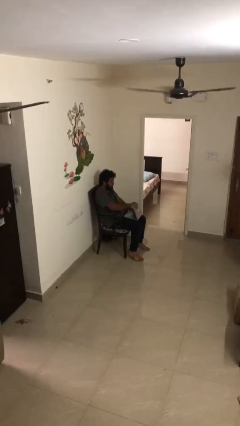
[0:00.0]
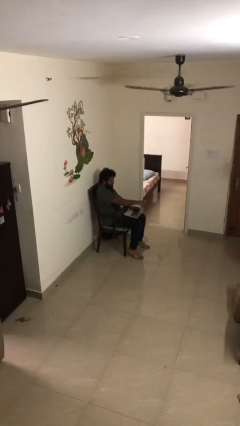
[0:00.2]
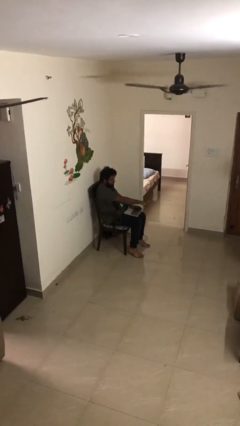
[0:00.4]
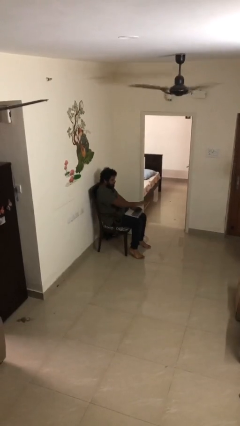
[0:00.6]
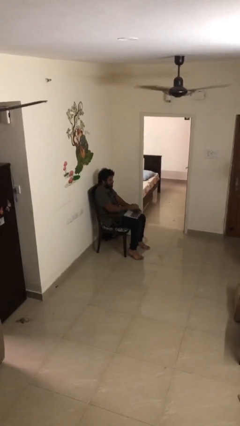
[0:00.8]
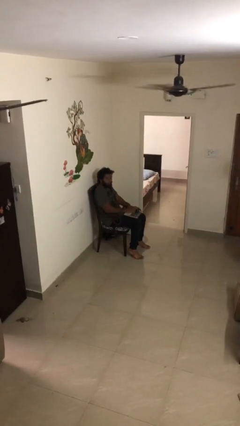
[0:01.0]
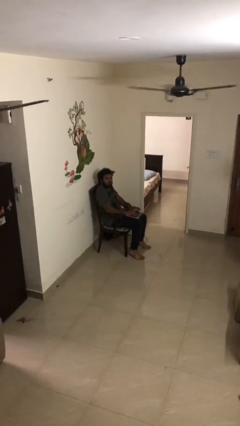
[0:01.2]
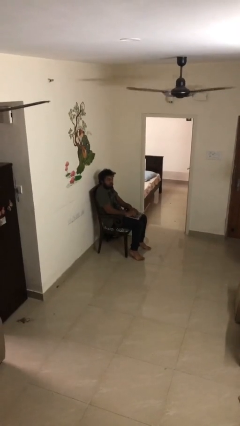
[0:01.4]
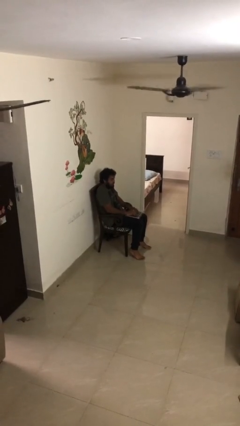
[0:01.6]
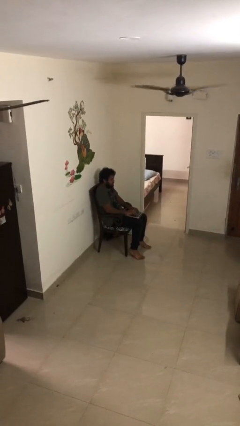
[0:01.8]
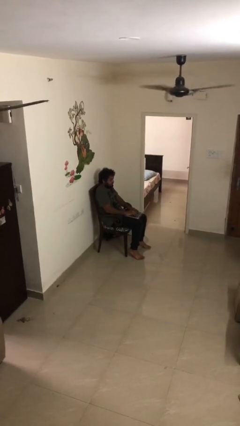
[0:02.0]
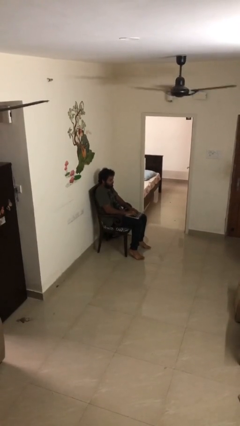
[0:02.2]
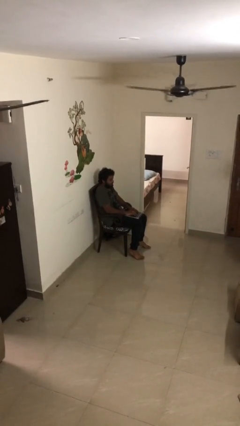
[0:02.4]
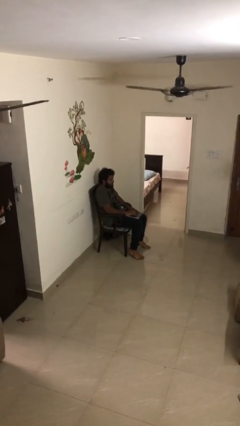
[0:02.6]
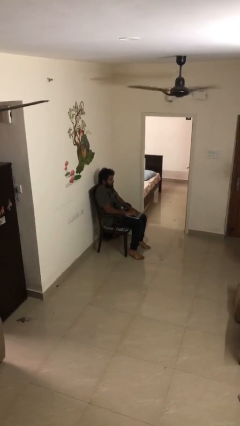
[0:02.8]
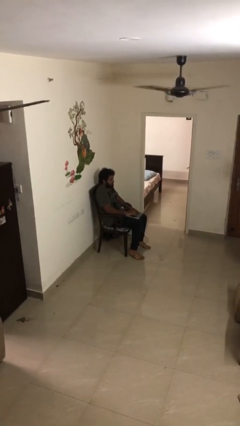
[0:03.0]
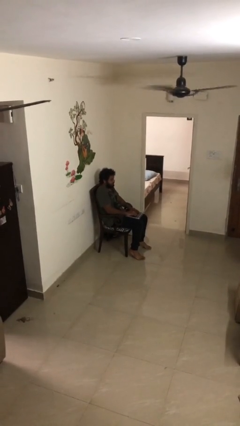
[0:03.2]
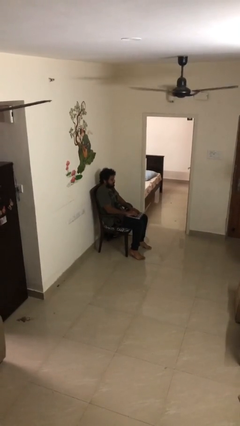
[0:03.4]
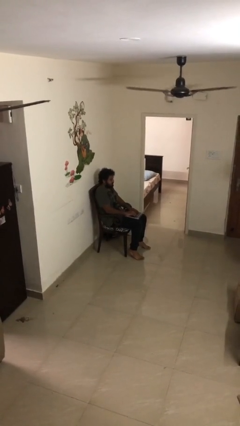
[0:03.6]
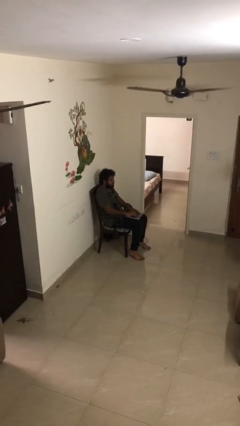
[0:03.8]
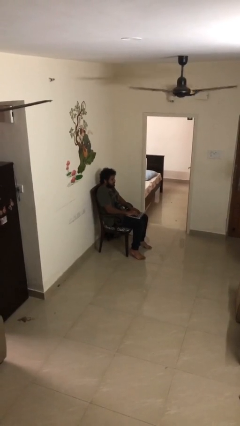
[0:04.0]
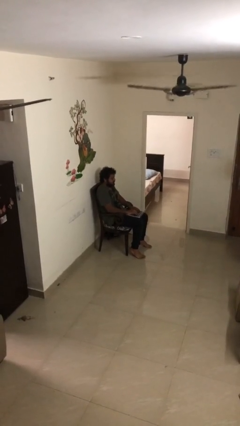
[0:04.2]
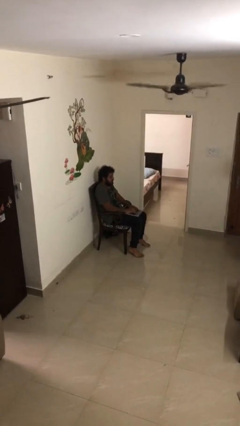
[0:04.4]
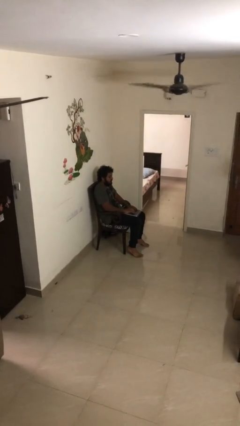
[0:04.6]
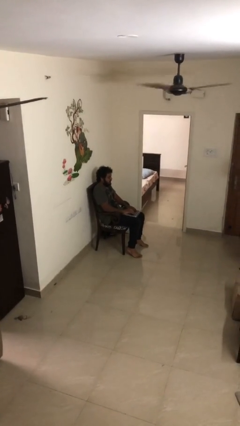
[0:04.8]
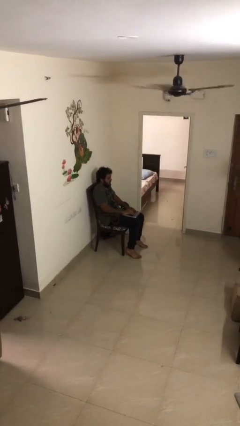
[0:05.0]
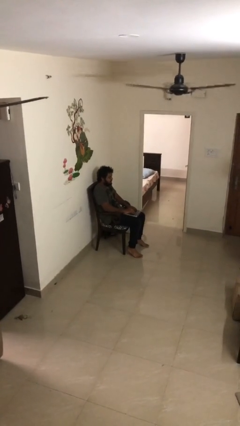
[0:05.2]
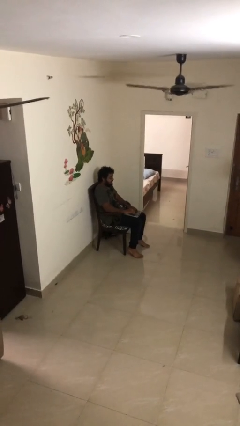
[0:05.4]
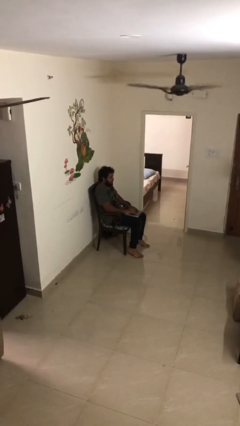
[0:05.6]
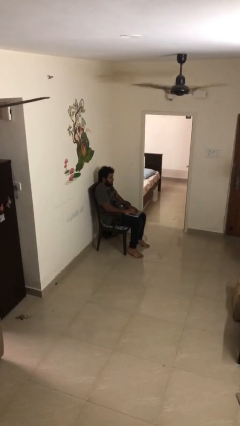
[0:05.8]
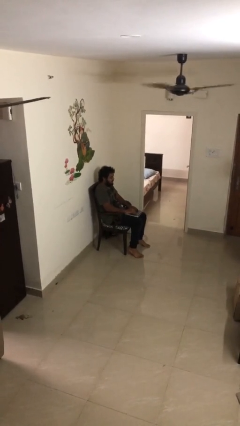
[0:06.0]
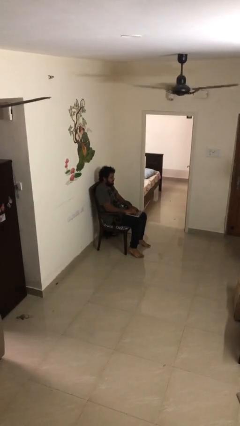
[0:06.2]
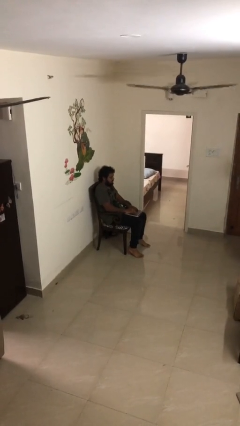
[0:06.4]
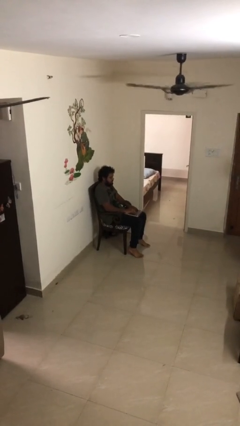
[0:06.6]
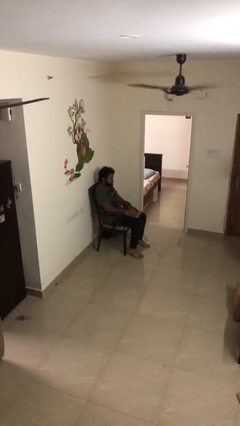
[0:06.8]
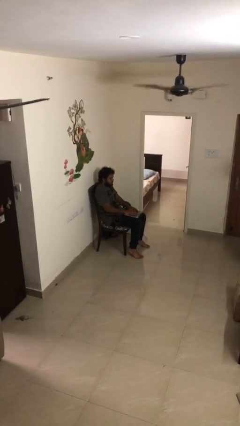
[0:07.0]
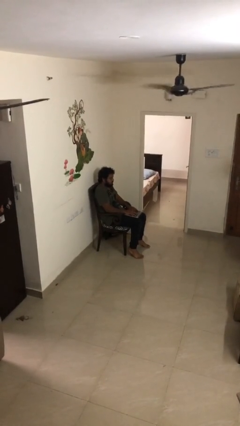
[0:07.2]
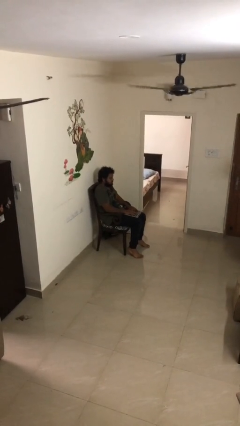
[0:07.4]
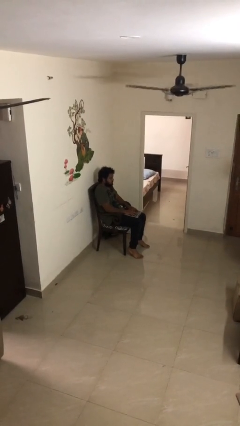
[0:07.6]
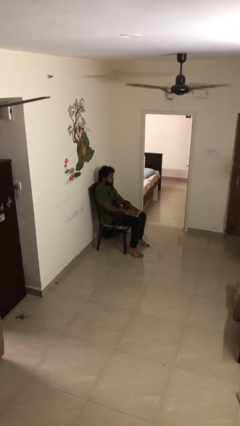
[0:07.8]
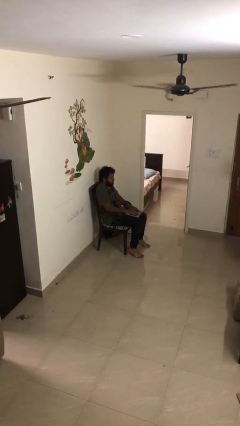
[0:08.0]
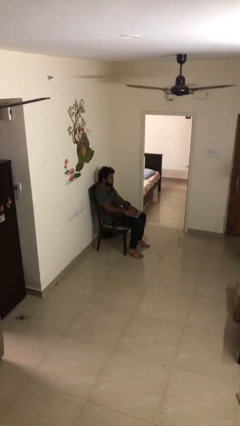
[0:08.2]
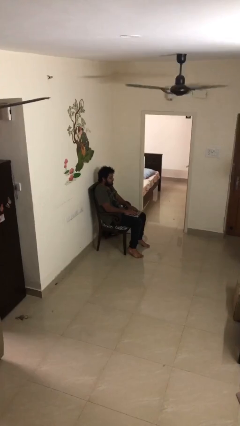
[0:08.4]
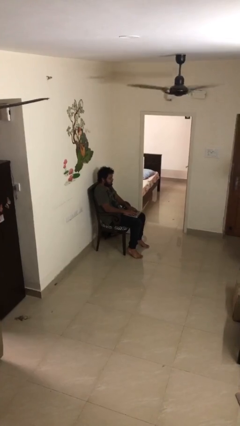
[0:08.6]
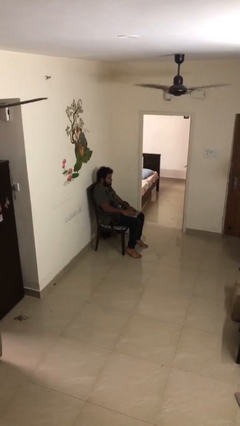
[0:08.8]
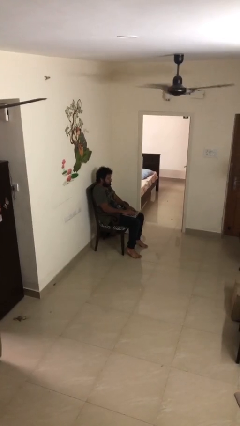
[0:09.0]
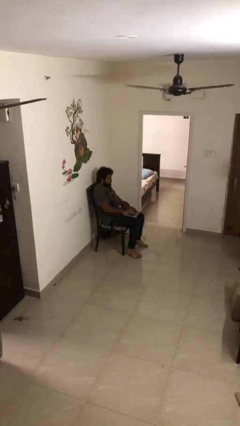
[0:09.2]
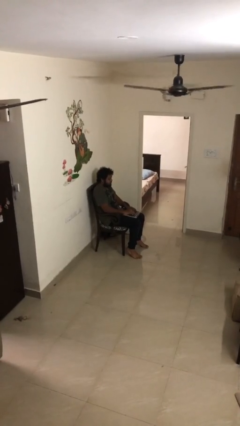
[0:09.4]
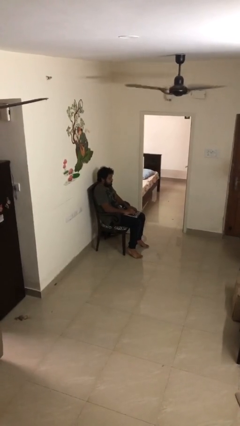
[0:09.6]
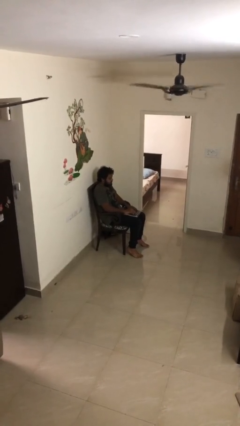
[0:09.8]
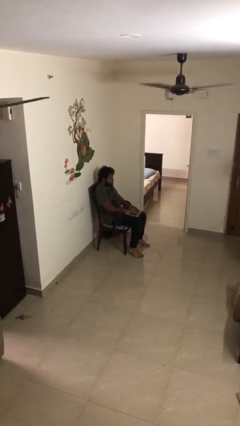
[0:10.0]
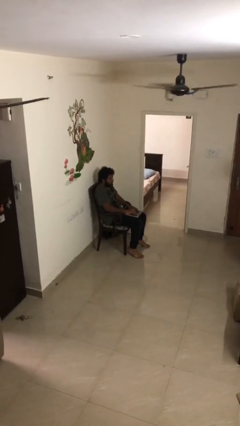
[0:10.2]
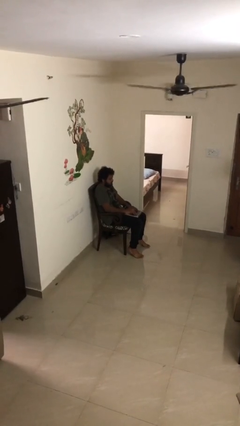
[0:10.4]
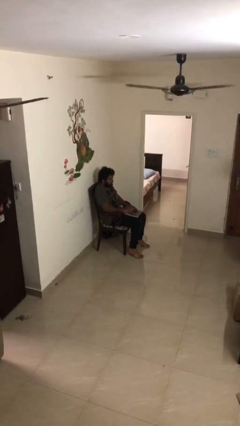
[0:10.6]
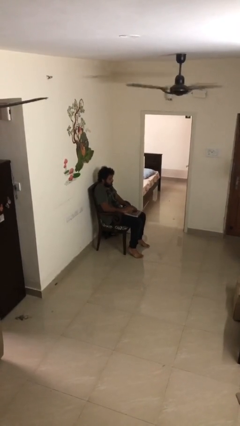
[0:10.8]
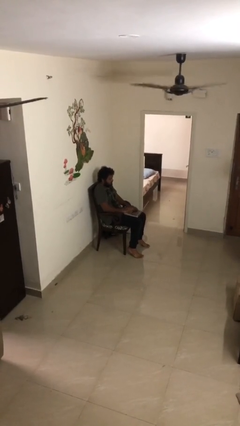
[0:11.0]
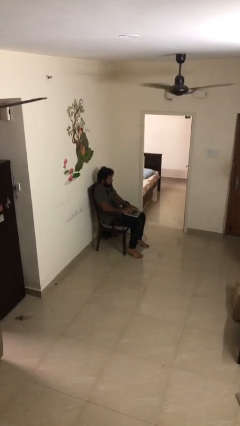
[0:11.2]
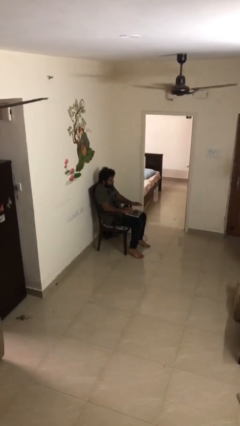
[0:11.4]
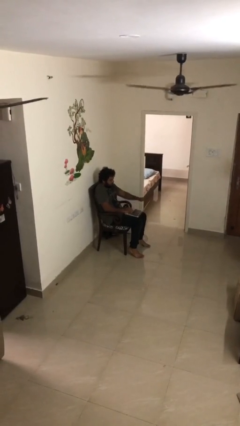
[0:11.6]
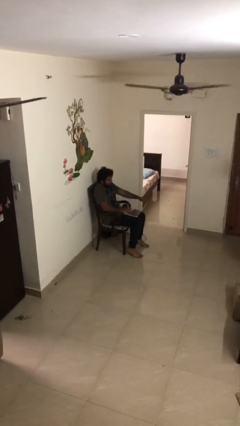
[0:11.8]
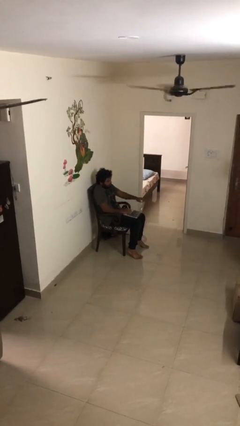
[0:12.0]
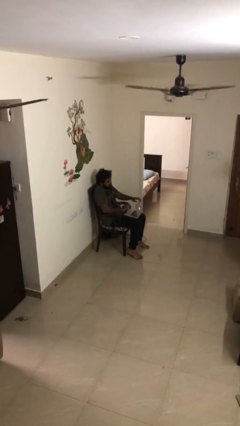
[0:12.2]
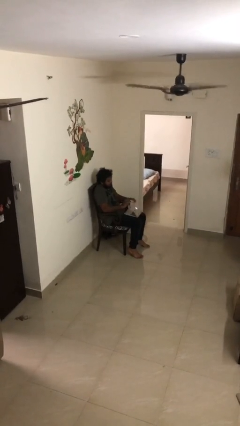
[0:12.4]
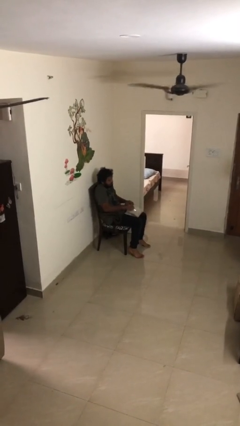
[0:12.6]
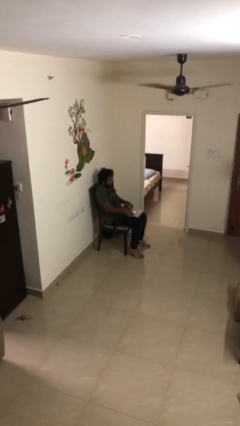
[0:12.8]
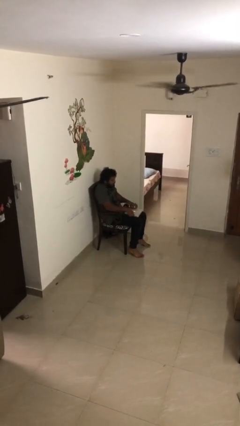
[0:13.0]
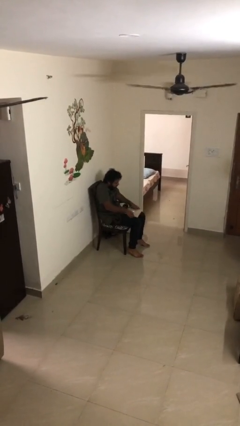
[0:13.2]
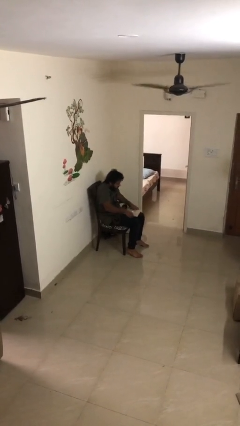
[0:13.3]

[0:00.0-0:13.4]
person interacts with laptop

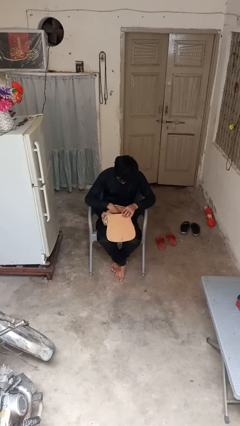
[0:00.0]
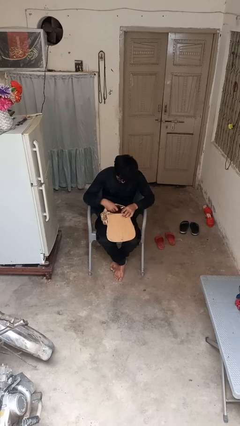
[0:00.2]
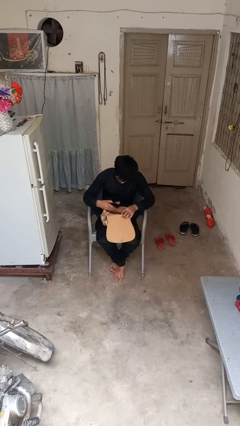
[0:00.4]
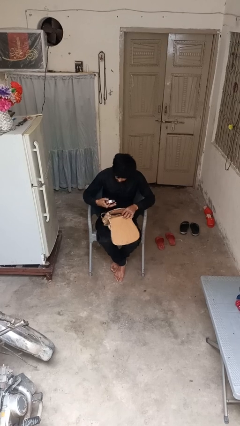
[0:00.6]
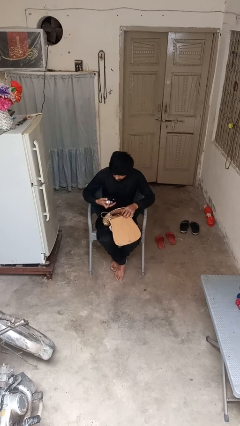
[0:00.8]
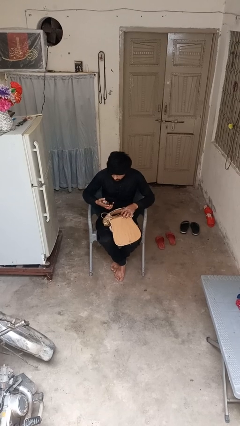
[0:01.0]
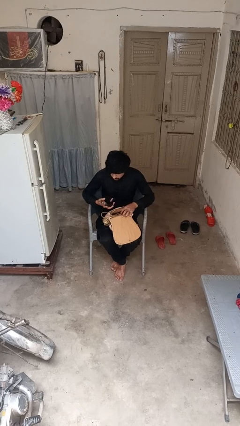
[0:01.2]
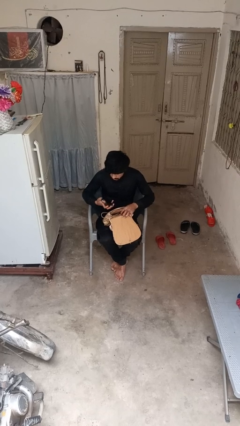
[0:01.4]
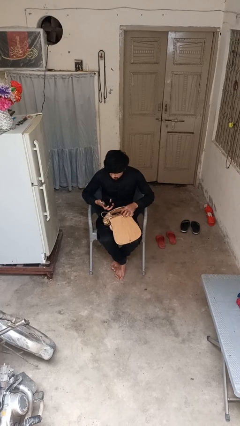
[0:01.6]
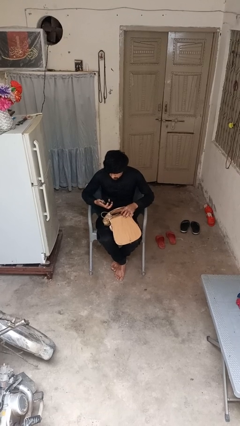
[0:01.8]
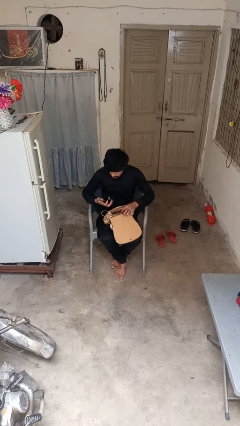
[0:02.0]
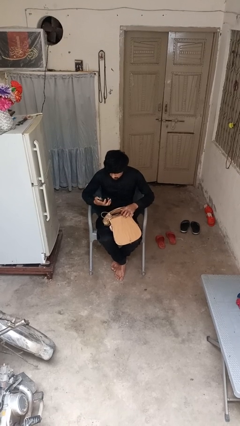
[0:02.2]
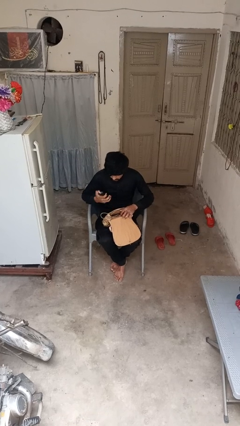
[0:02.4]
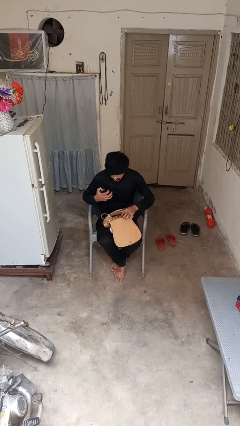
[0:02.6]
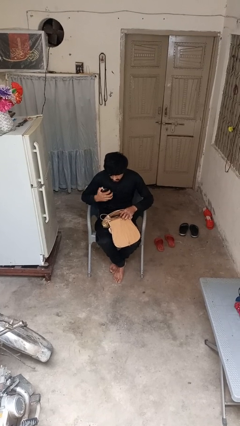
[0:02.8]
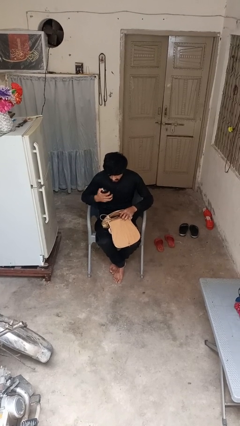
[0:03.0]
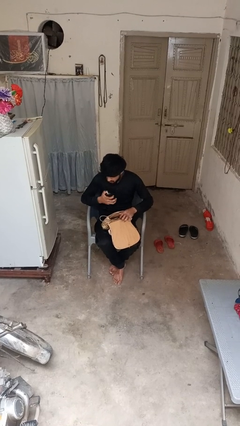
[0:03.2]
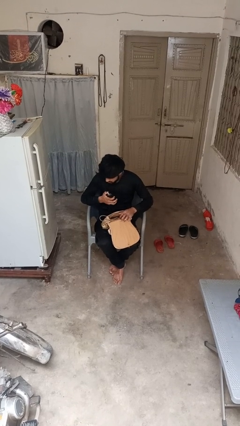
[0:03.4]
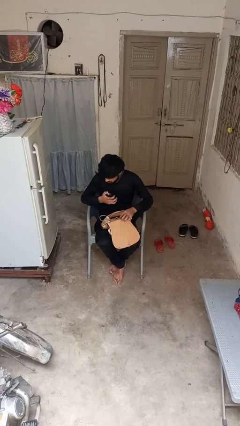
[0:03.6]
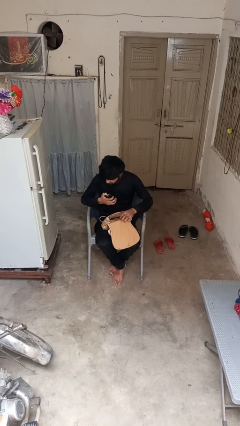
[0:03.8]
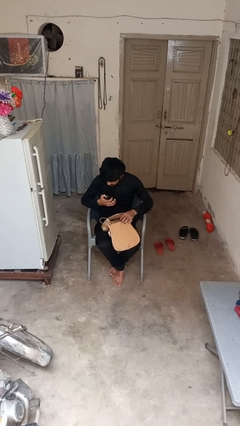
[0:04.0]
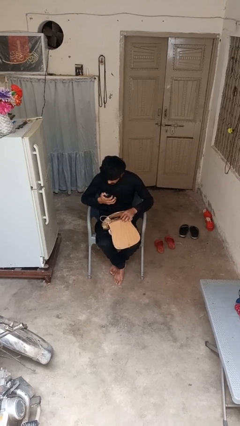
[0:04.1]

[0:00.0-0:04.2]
person takes object from purse

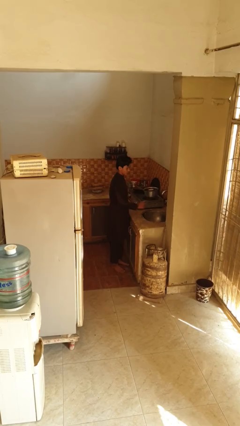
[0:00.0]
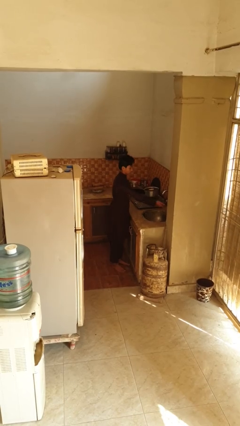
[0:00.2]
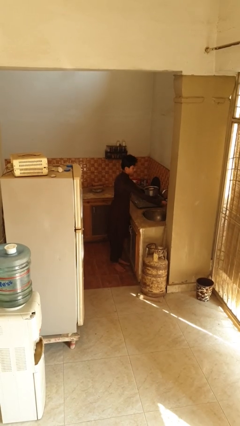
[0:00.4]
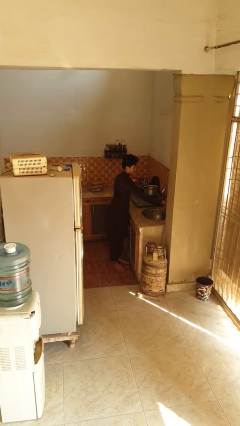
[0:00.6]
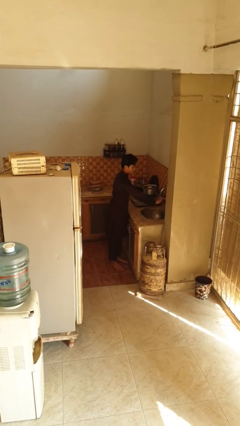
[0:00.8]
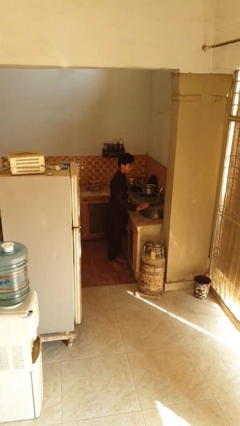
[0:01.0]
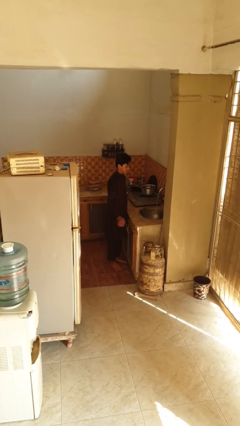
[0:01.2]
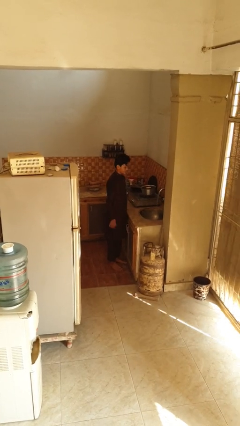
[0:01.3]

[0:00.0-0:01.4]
person turns on faucet
